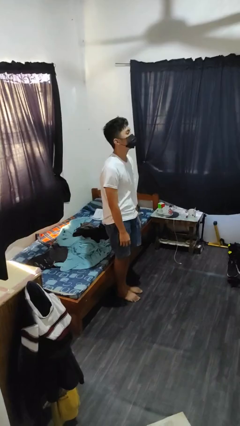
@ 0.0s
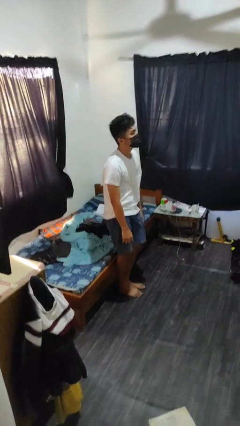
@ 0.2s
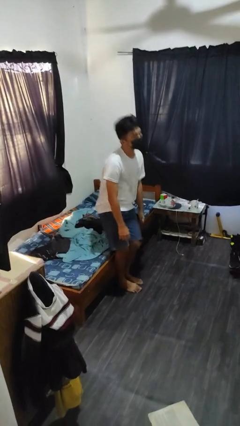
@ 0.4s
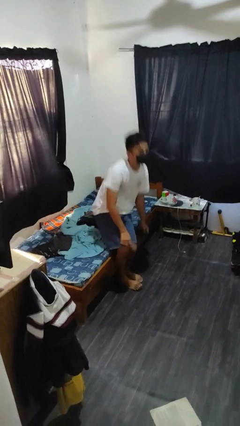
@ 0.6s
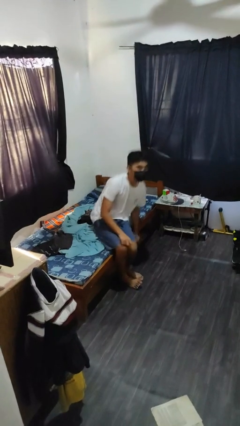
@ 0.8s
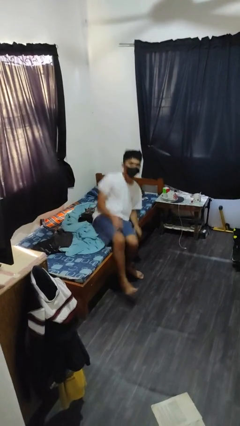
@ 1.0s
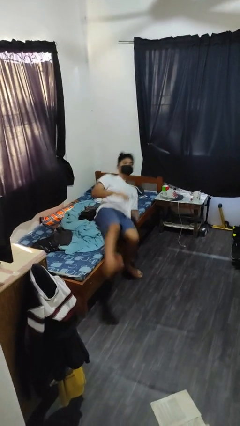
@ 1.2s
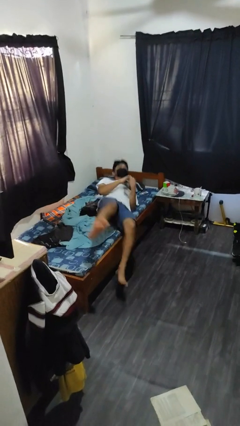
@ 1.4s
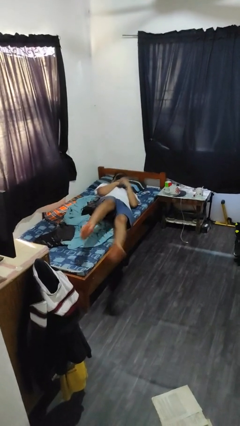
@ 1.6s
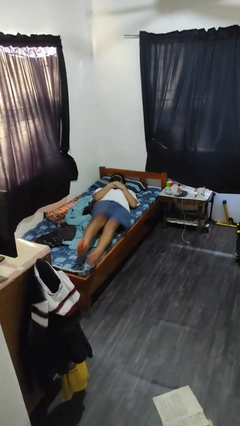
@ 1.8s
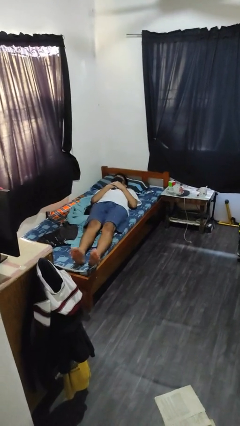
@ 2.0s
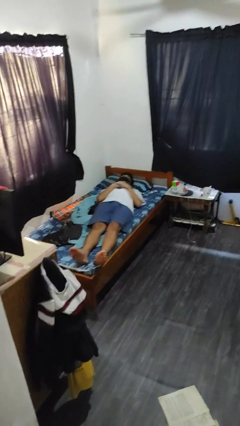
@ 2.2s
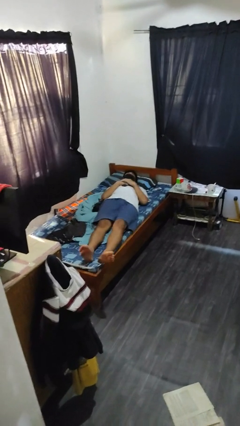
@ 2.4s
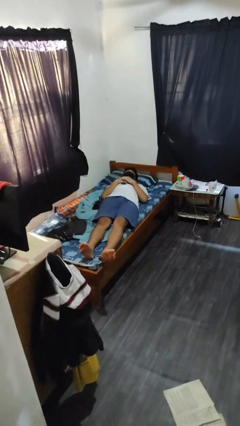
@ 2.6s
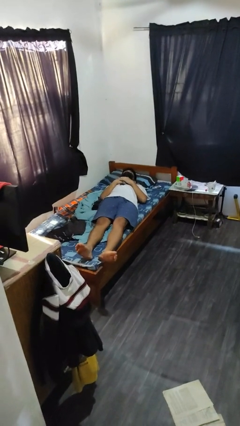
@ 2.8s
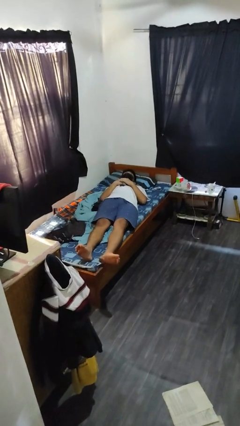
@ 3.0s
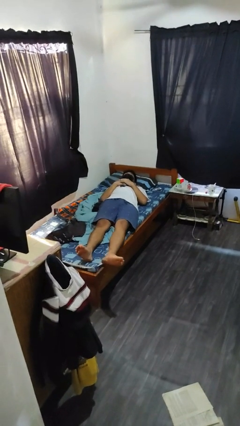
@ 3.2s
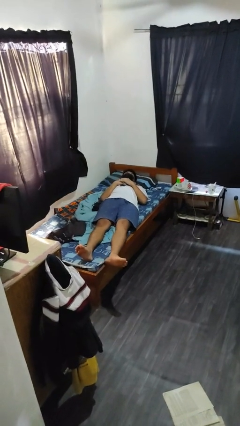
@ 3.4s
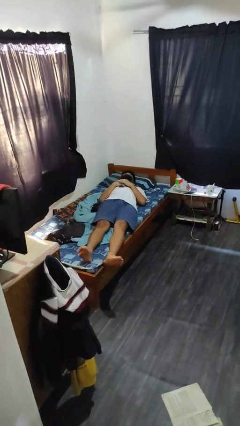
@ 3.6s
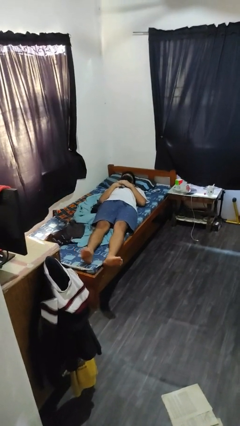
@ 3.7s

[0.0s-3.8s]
person lies down on bed

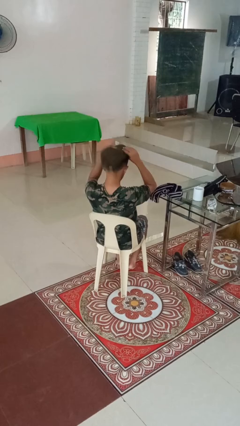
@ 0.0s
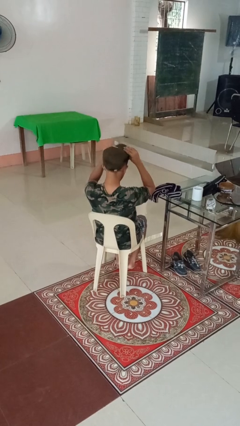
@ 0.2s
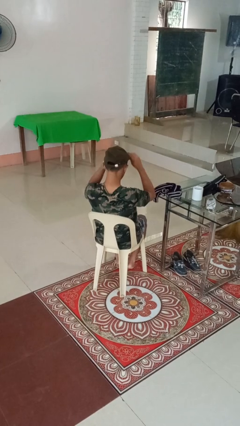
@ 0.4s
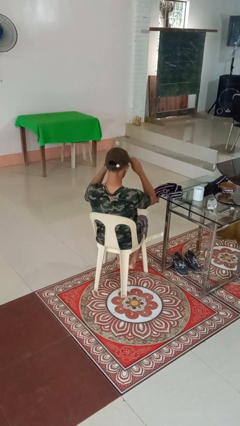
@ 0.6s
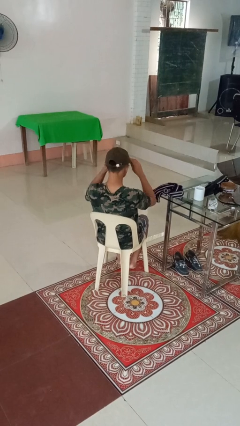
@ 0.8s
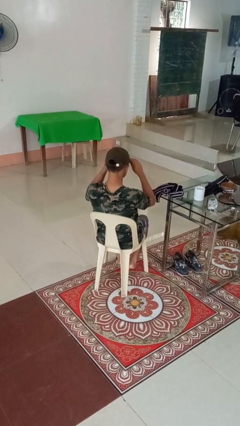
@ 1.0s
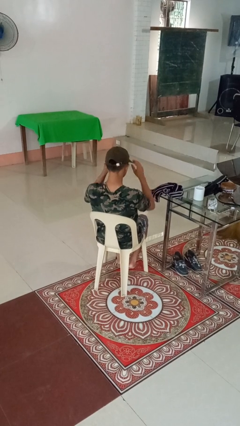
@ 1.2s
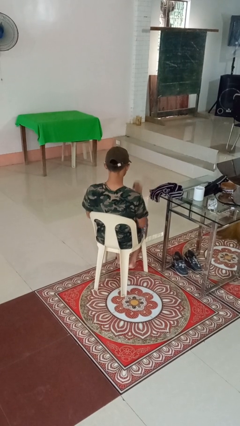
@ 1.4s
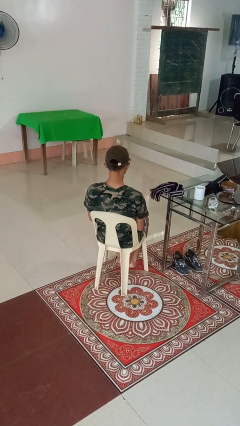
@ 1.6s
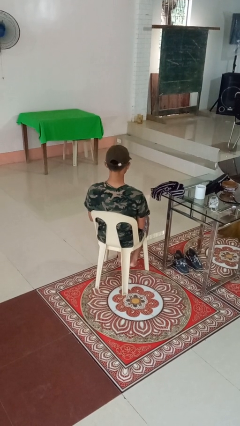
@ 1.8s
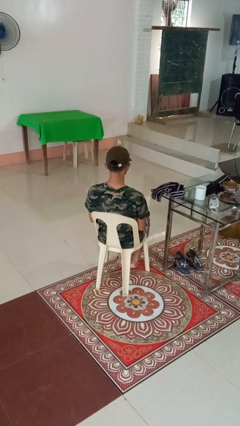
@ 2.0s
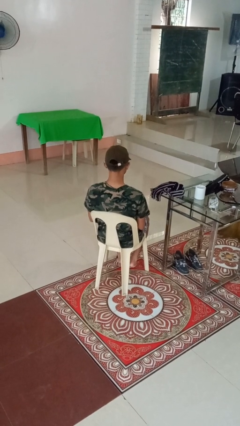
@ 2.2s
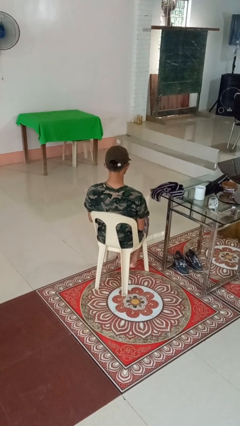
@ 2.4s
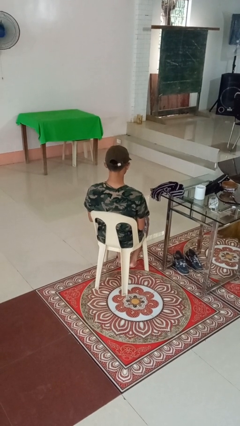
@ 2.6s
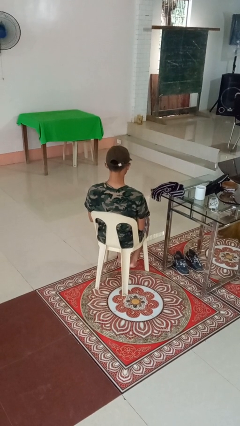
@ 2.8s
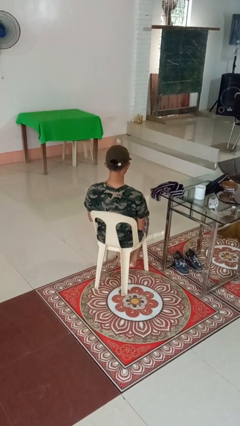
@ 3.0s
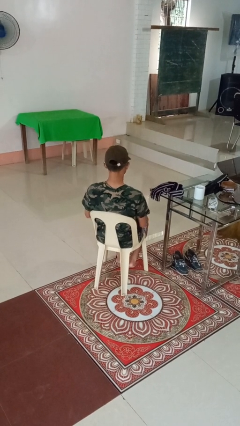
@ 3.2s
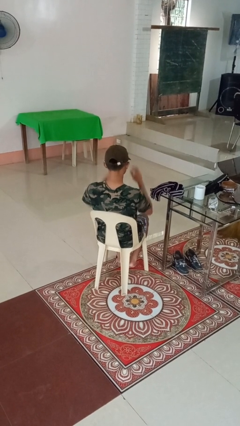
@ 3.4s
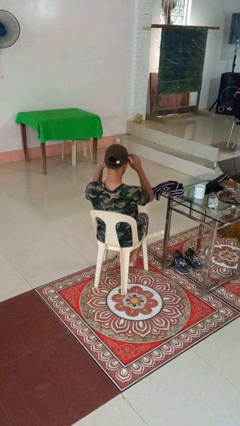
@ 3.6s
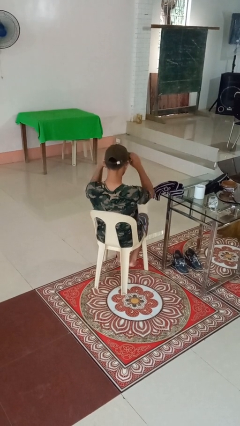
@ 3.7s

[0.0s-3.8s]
person puts on hat

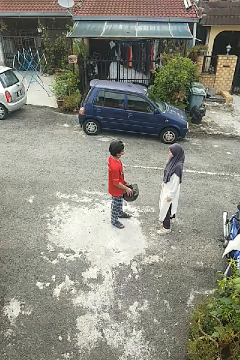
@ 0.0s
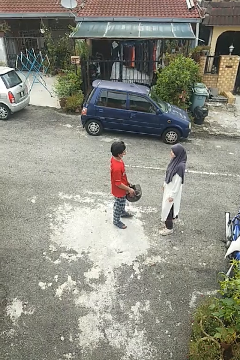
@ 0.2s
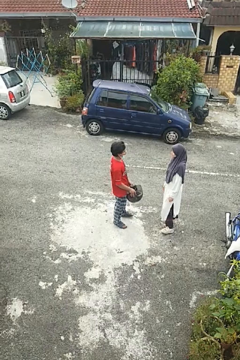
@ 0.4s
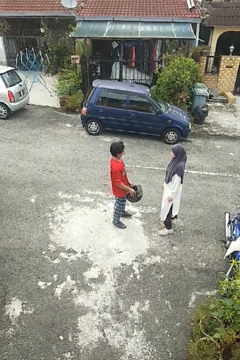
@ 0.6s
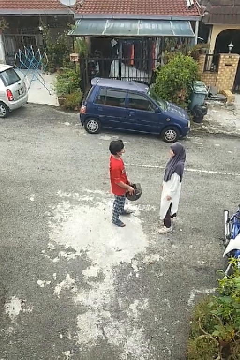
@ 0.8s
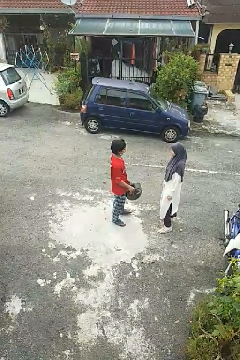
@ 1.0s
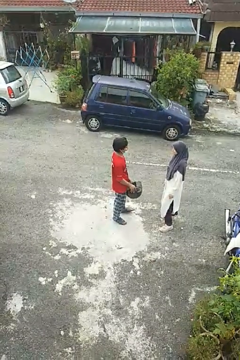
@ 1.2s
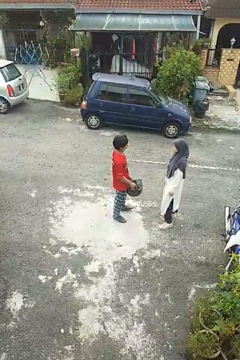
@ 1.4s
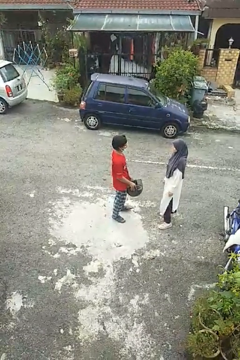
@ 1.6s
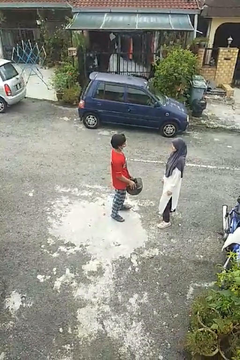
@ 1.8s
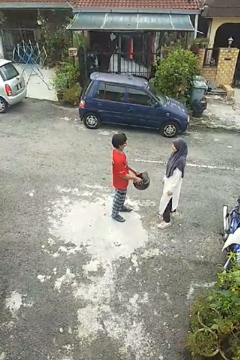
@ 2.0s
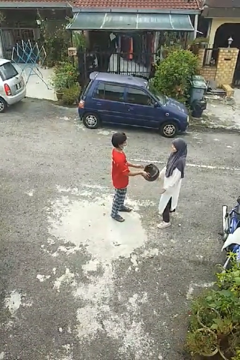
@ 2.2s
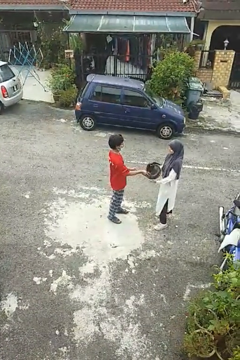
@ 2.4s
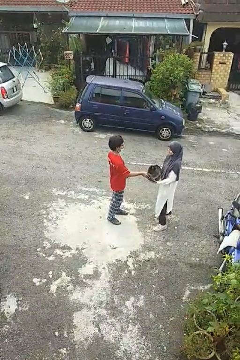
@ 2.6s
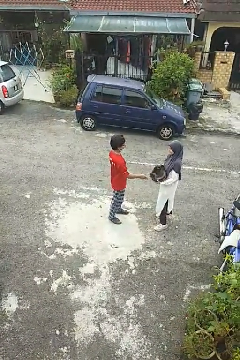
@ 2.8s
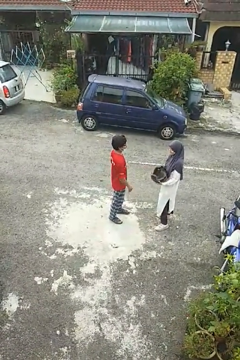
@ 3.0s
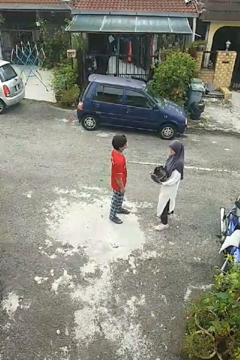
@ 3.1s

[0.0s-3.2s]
person transfers object to person

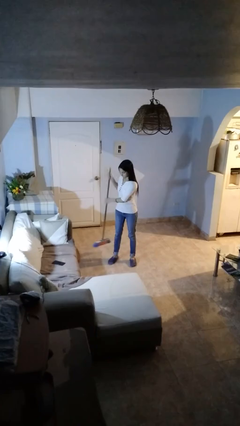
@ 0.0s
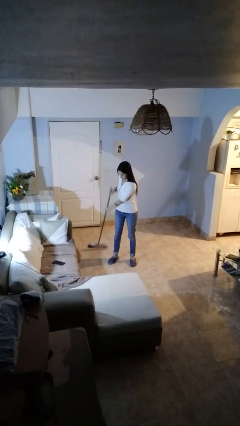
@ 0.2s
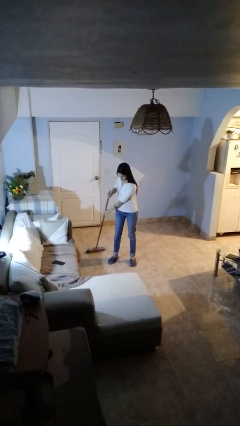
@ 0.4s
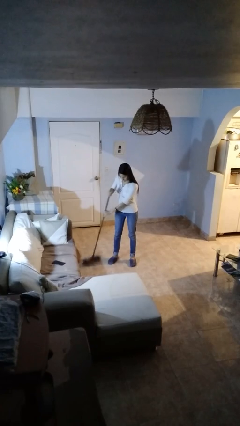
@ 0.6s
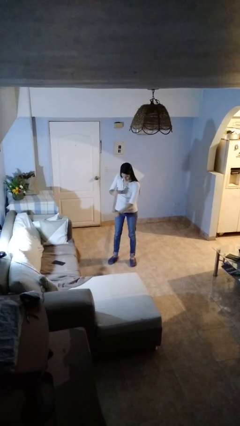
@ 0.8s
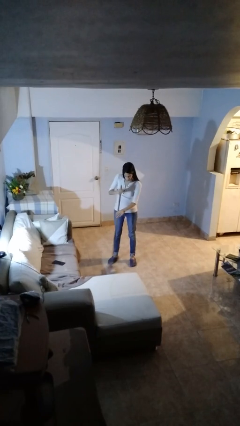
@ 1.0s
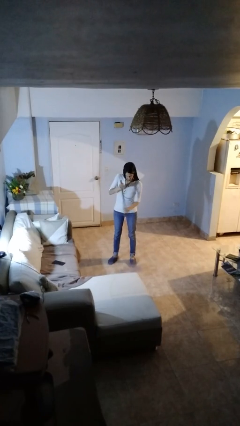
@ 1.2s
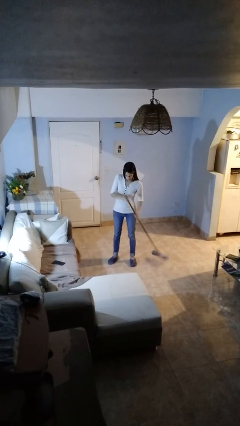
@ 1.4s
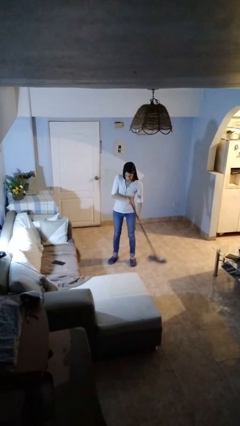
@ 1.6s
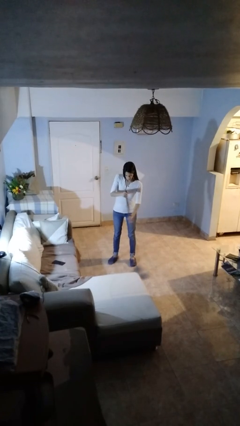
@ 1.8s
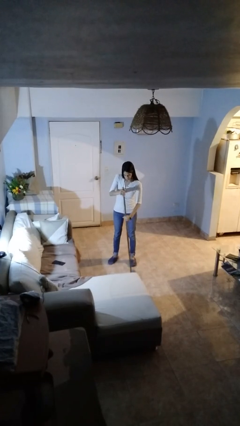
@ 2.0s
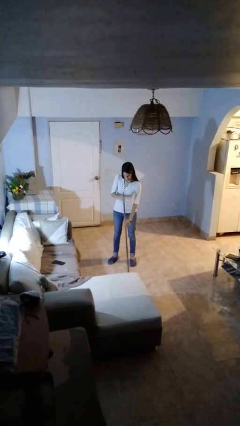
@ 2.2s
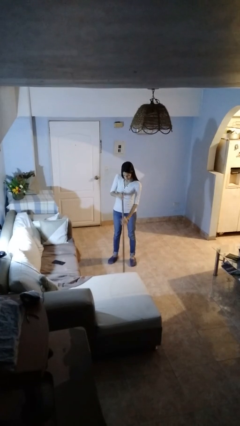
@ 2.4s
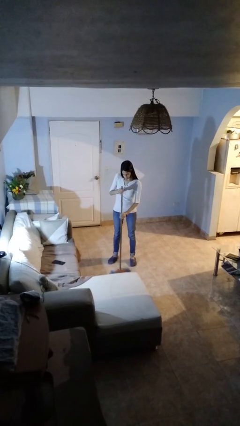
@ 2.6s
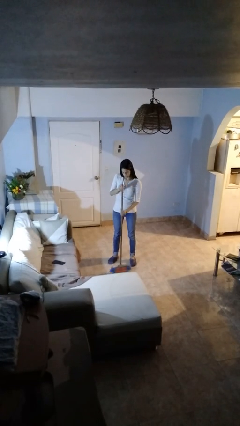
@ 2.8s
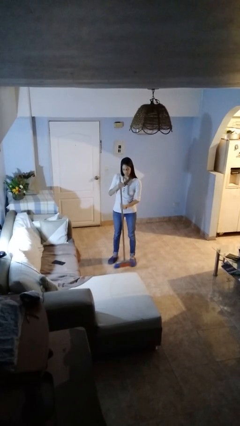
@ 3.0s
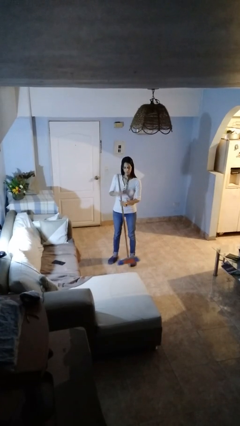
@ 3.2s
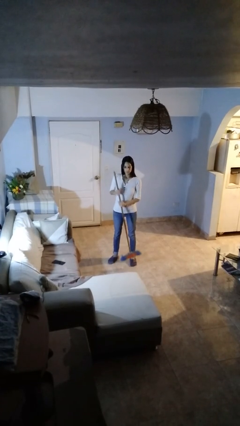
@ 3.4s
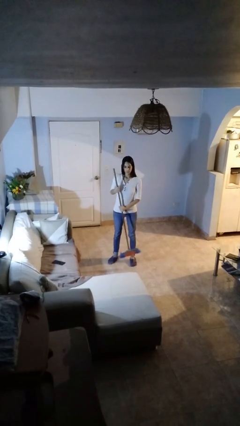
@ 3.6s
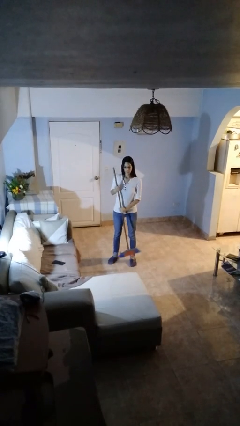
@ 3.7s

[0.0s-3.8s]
person sweeps floor

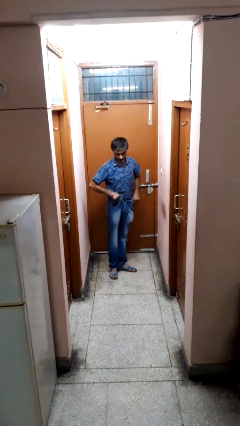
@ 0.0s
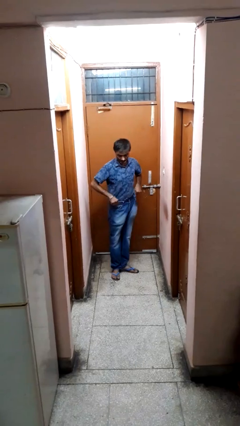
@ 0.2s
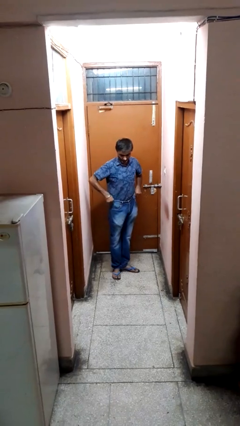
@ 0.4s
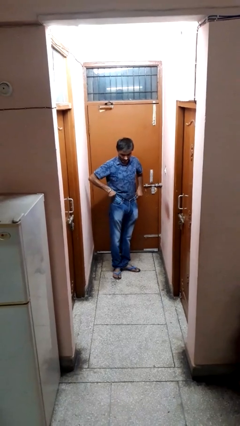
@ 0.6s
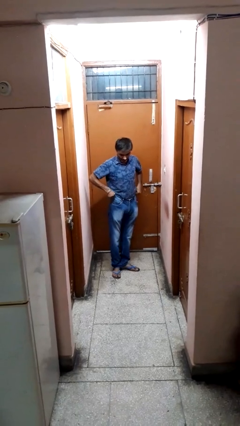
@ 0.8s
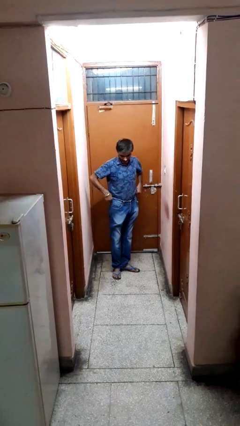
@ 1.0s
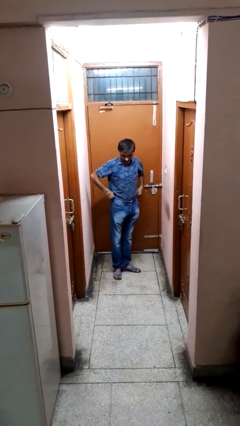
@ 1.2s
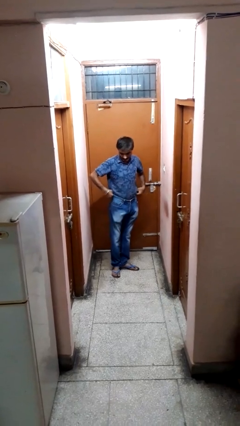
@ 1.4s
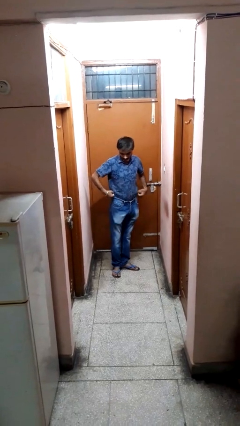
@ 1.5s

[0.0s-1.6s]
person hikes up pants

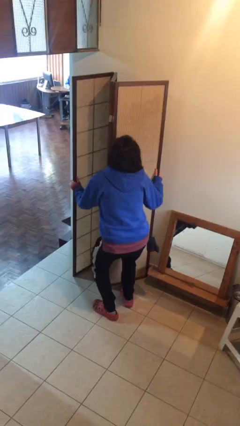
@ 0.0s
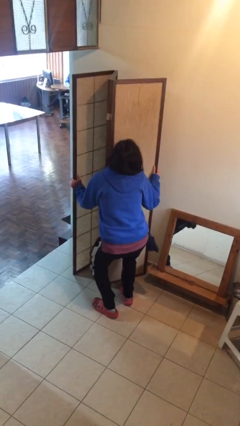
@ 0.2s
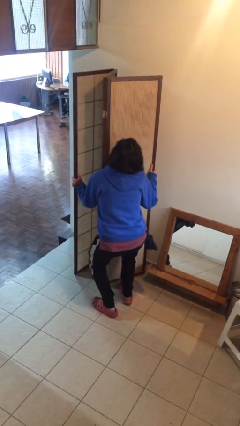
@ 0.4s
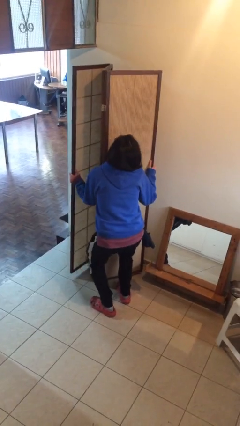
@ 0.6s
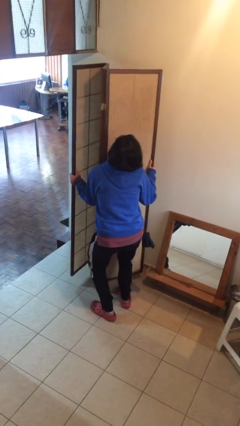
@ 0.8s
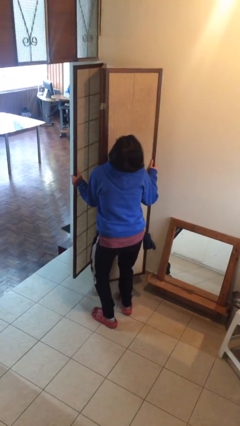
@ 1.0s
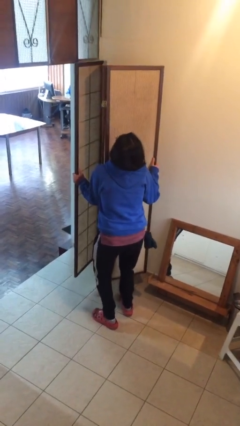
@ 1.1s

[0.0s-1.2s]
person picks up object from floor

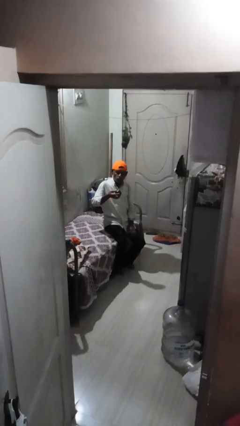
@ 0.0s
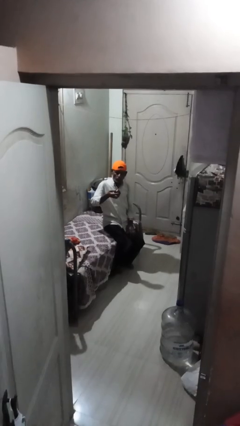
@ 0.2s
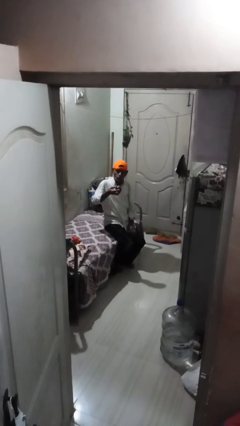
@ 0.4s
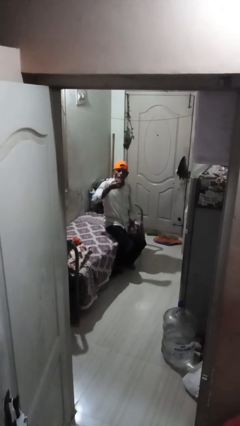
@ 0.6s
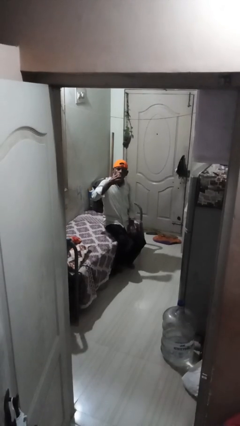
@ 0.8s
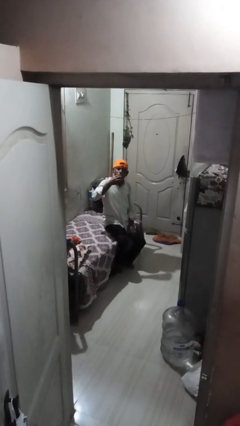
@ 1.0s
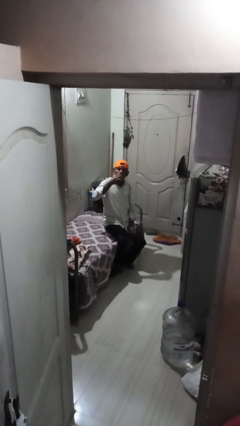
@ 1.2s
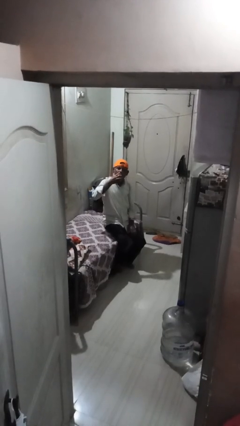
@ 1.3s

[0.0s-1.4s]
person eats apple
